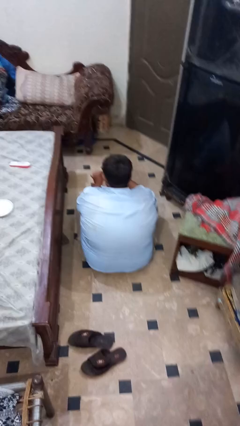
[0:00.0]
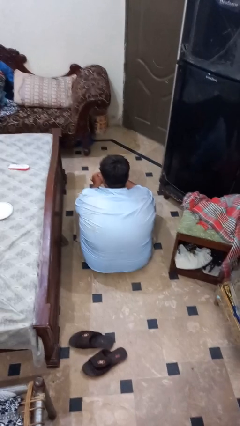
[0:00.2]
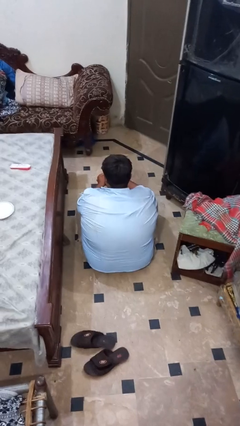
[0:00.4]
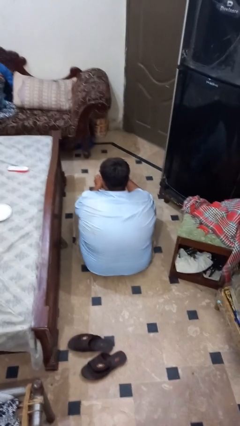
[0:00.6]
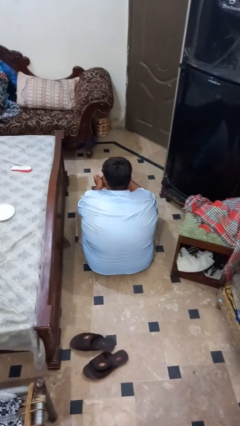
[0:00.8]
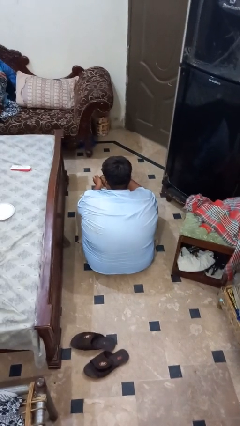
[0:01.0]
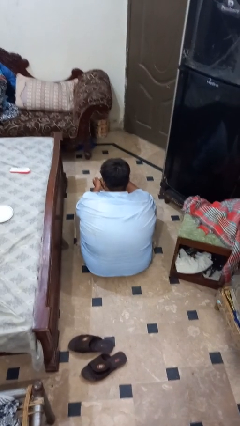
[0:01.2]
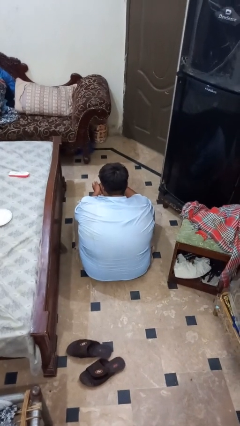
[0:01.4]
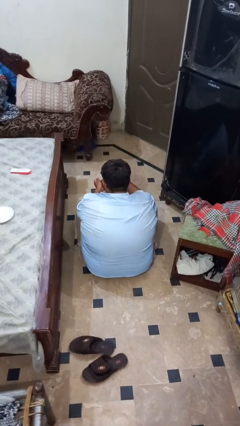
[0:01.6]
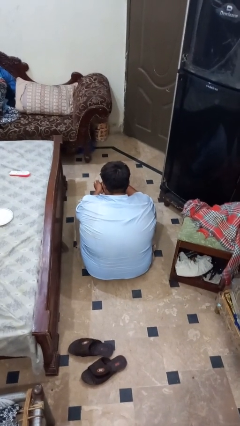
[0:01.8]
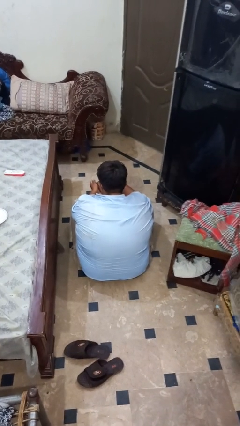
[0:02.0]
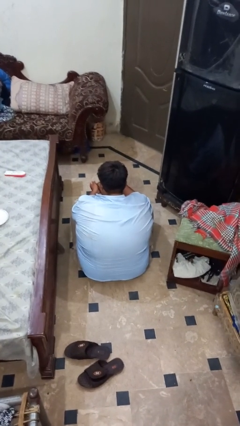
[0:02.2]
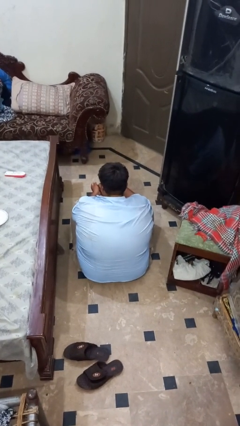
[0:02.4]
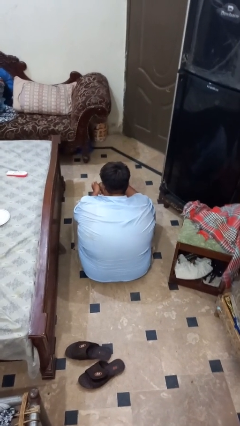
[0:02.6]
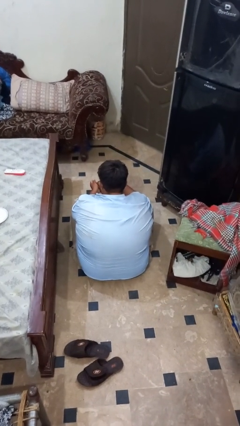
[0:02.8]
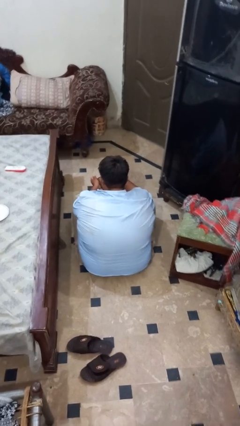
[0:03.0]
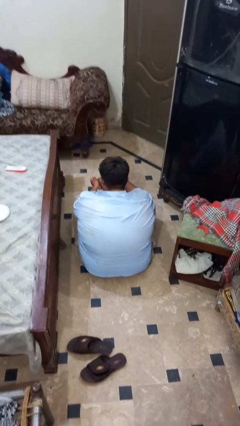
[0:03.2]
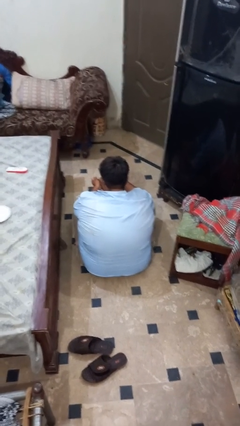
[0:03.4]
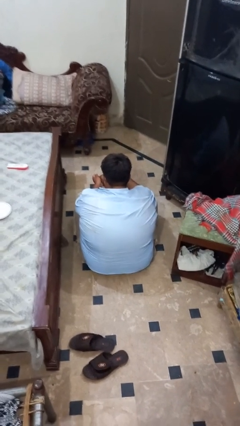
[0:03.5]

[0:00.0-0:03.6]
person stirs mug

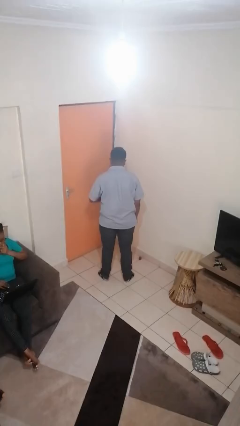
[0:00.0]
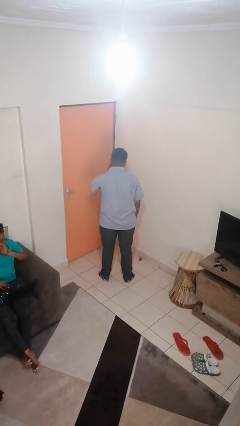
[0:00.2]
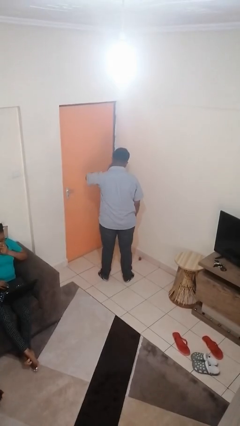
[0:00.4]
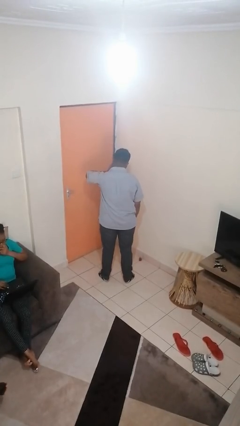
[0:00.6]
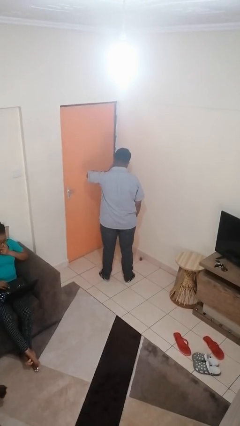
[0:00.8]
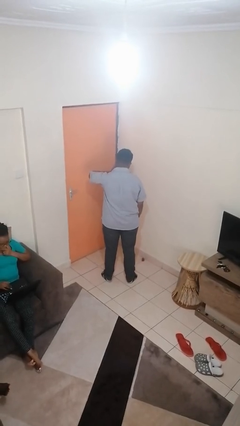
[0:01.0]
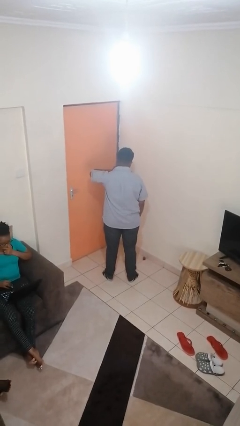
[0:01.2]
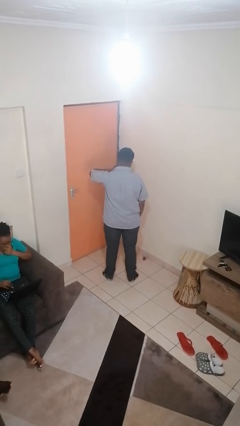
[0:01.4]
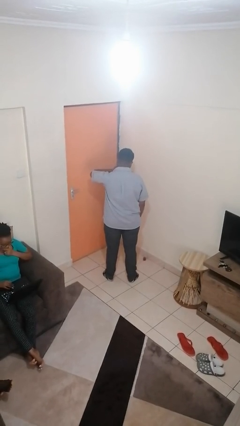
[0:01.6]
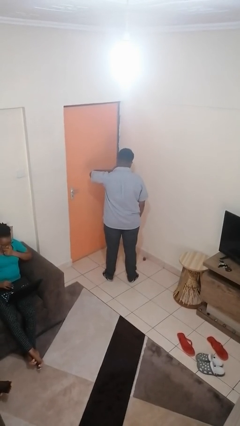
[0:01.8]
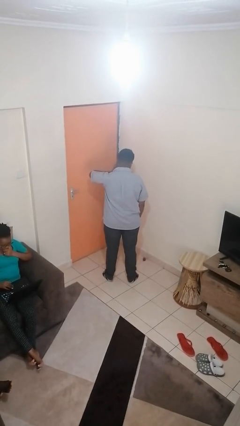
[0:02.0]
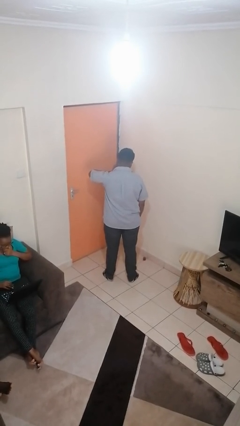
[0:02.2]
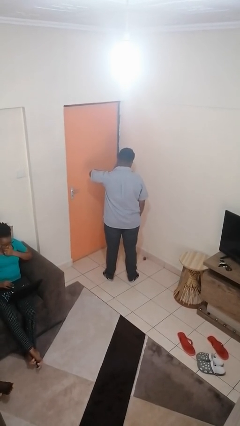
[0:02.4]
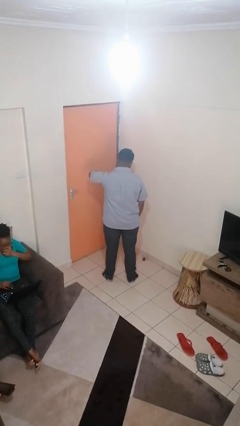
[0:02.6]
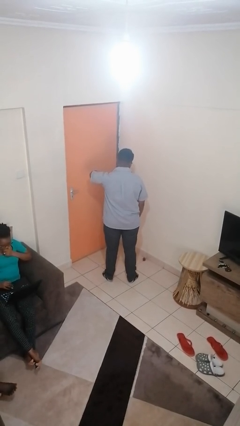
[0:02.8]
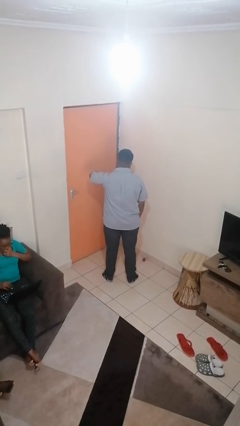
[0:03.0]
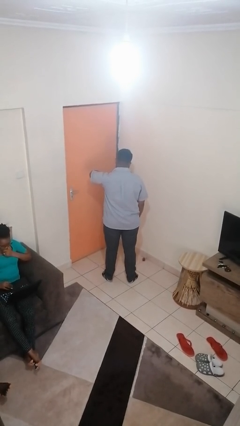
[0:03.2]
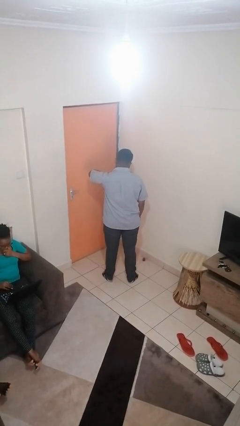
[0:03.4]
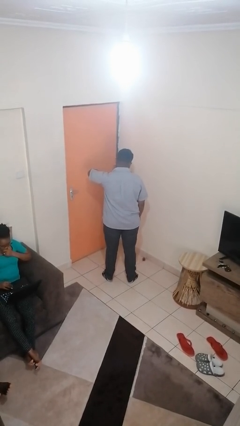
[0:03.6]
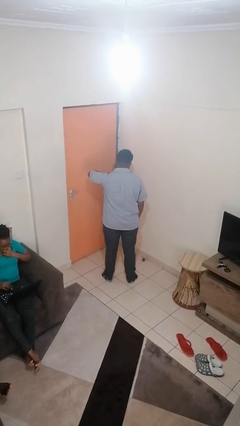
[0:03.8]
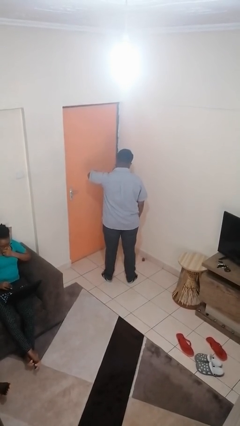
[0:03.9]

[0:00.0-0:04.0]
person scratches face

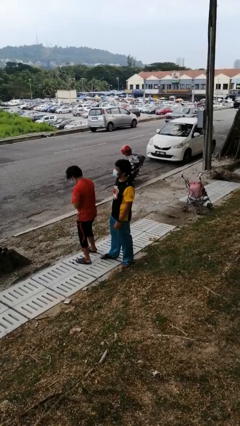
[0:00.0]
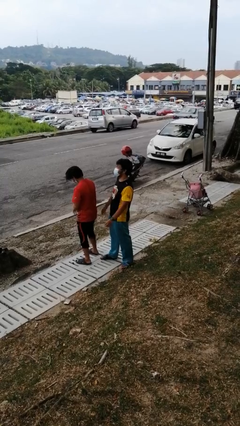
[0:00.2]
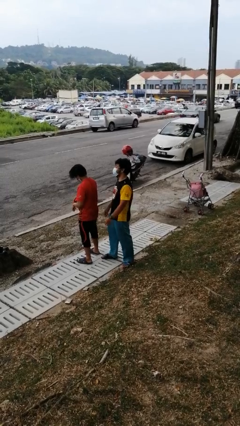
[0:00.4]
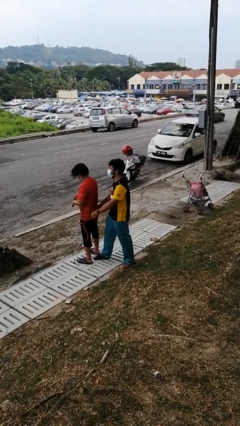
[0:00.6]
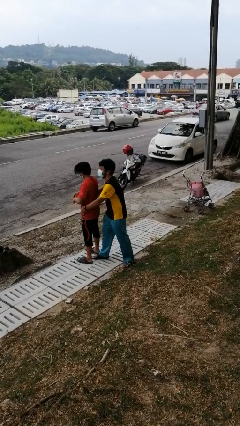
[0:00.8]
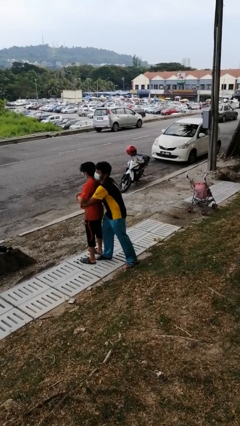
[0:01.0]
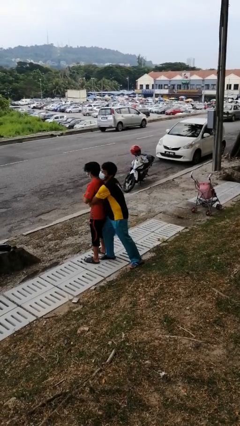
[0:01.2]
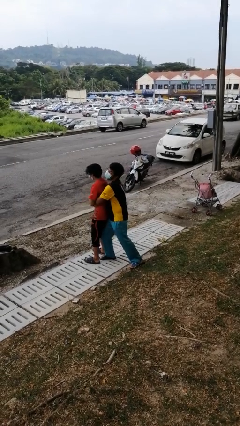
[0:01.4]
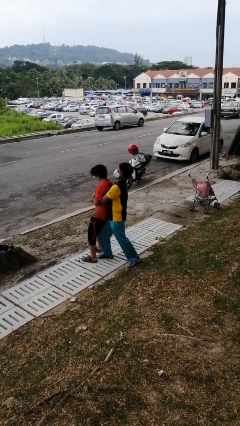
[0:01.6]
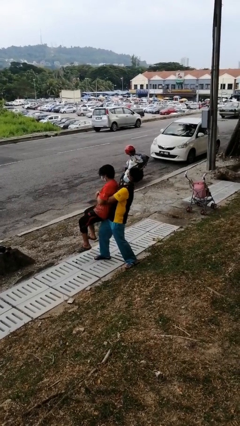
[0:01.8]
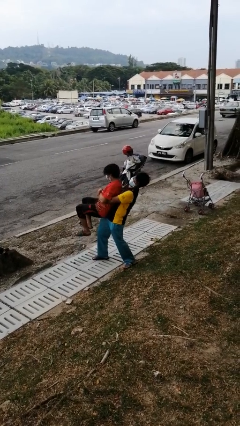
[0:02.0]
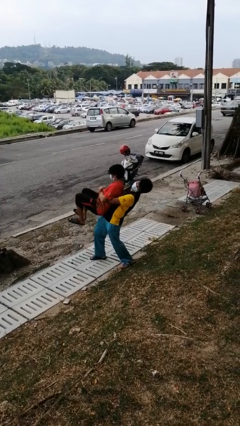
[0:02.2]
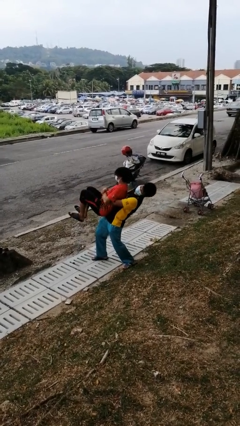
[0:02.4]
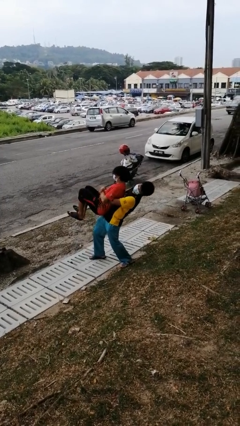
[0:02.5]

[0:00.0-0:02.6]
person picks up person

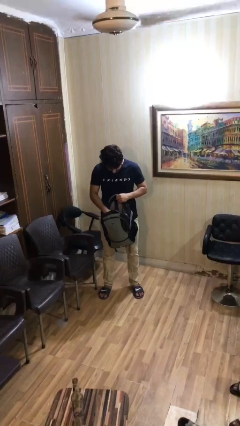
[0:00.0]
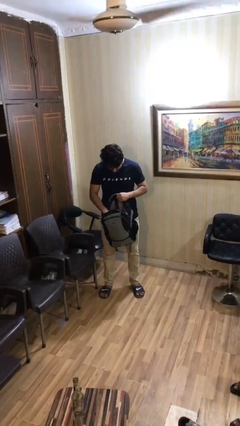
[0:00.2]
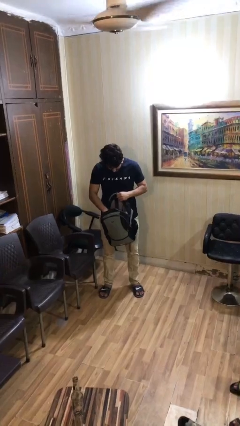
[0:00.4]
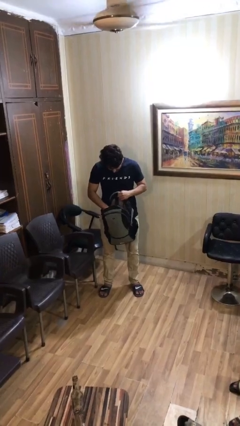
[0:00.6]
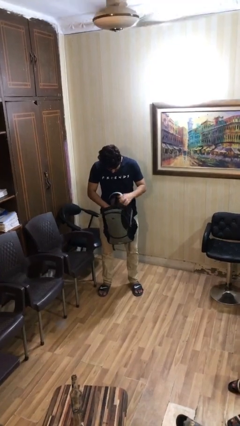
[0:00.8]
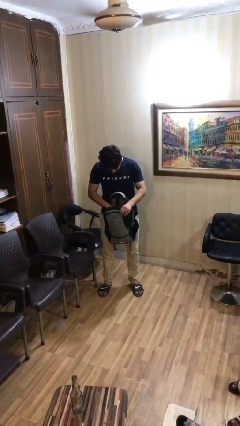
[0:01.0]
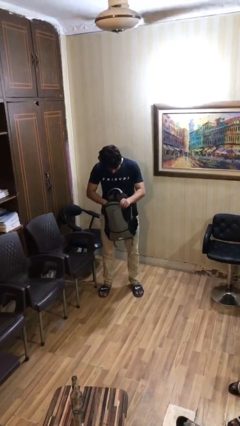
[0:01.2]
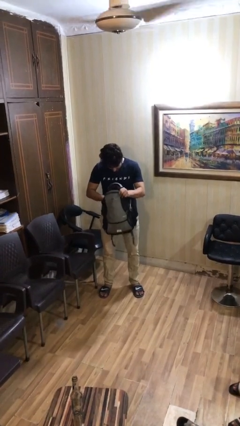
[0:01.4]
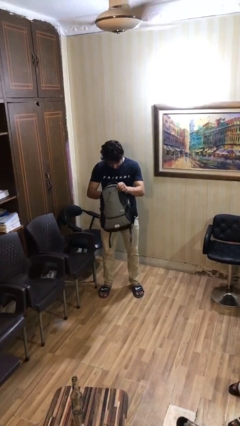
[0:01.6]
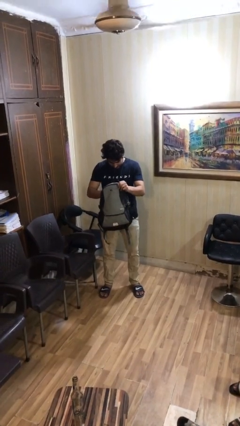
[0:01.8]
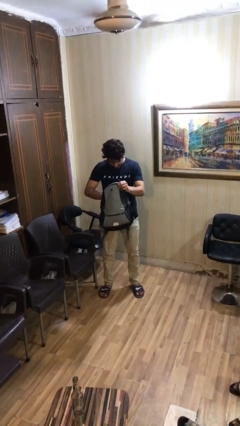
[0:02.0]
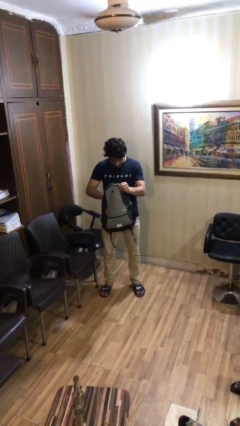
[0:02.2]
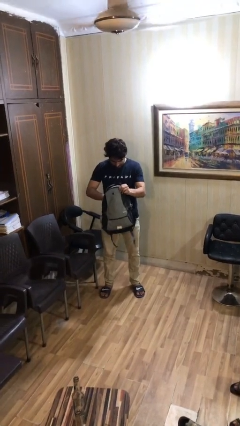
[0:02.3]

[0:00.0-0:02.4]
person searches in backpack

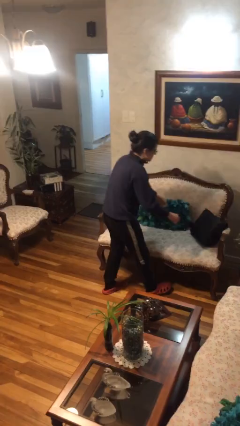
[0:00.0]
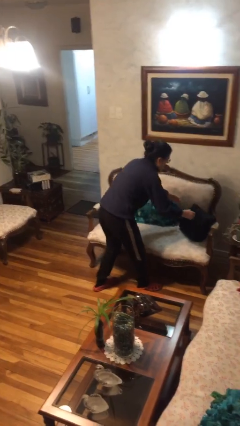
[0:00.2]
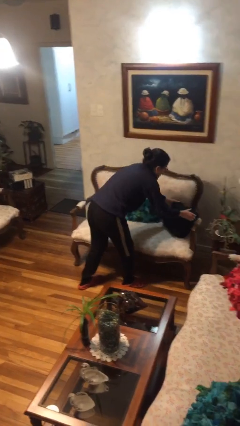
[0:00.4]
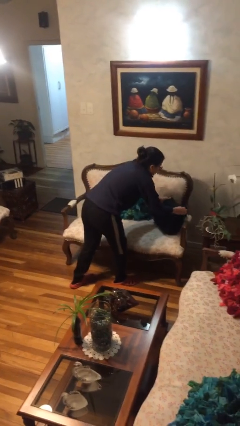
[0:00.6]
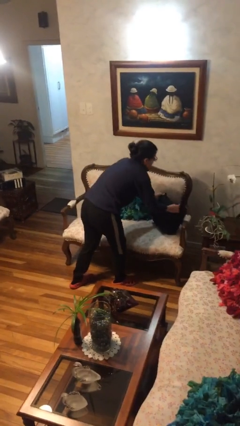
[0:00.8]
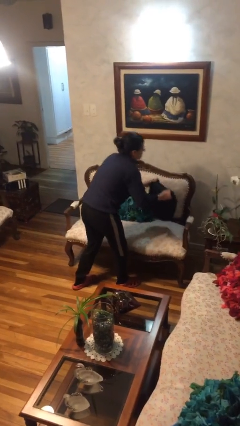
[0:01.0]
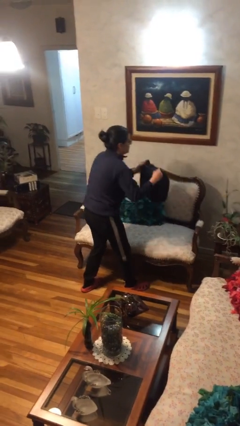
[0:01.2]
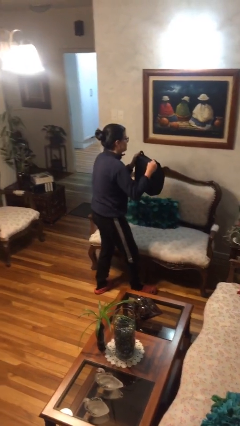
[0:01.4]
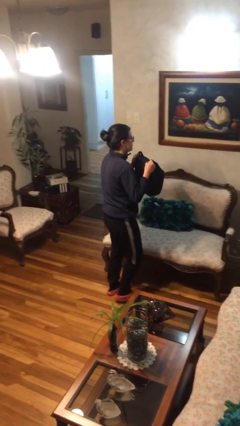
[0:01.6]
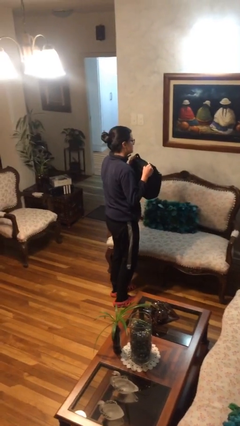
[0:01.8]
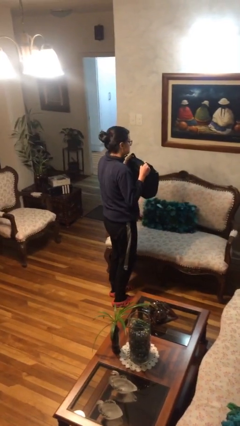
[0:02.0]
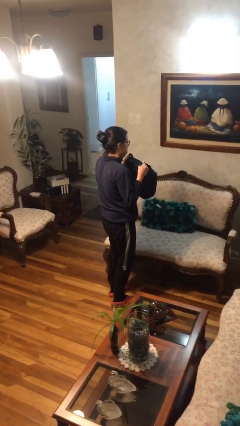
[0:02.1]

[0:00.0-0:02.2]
person picks up object from couch

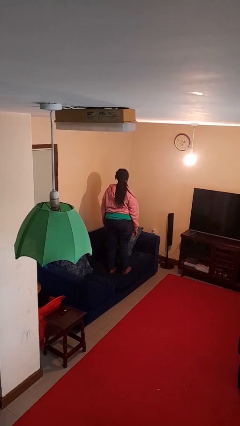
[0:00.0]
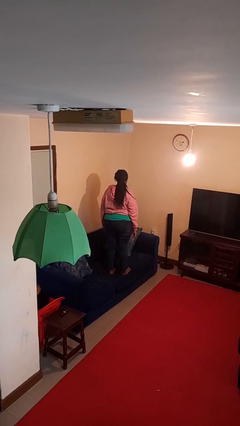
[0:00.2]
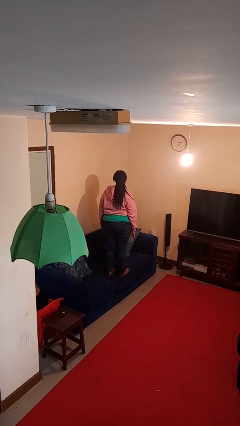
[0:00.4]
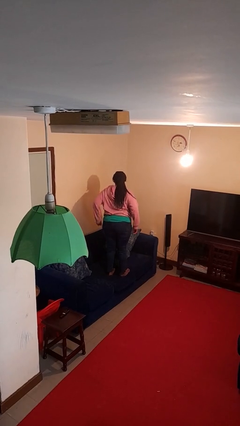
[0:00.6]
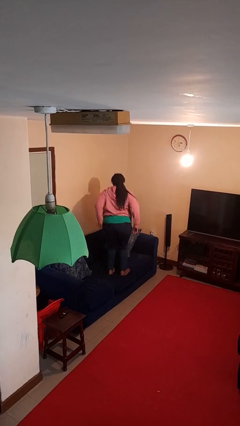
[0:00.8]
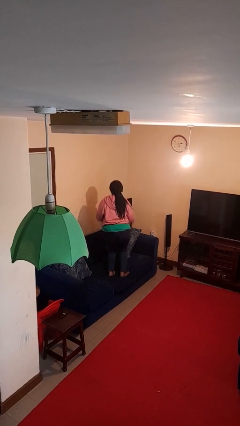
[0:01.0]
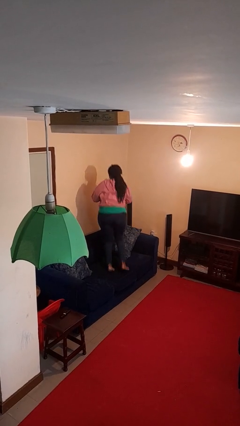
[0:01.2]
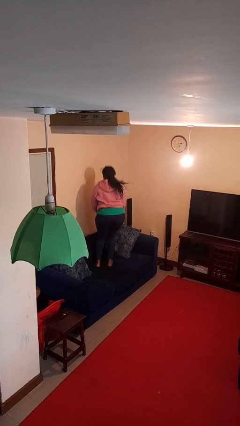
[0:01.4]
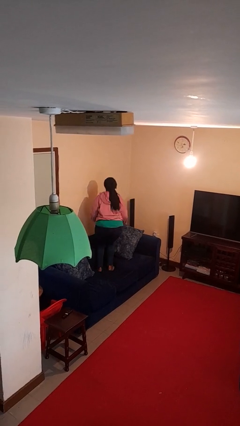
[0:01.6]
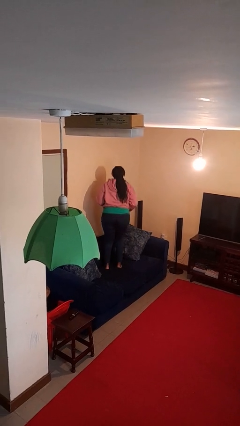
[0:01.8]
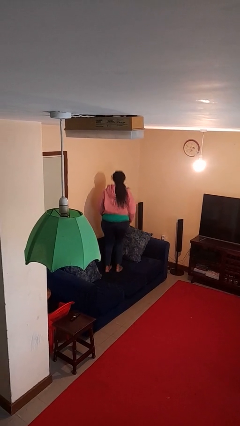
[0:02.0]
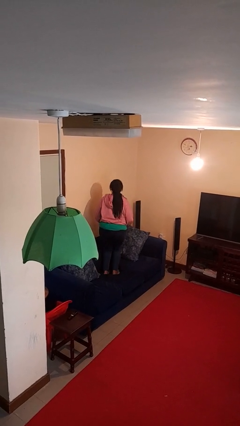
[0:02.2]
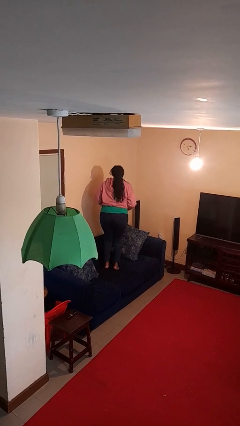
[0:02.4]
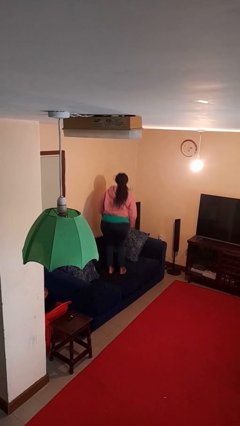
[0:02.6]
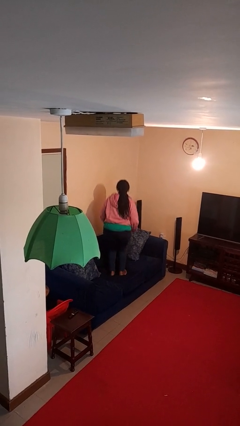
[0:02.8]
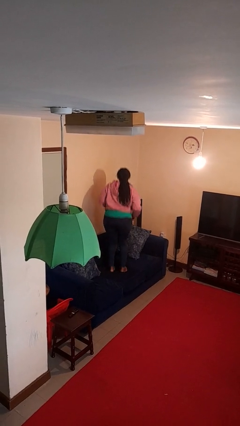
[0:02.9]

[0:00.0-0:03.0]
person jumps on couch
